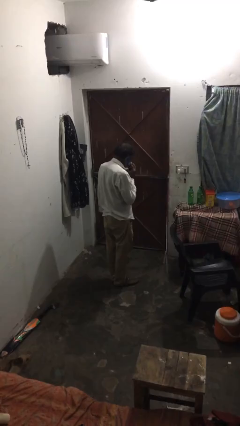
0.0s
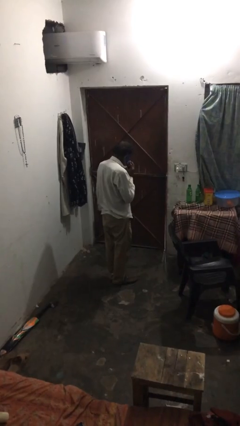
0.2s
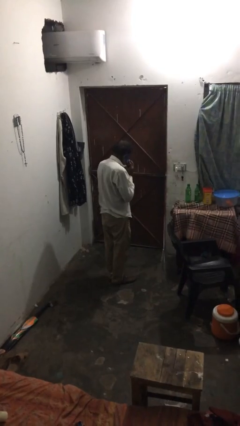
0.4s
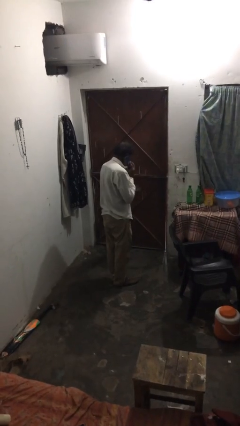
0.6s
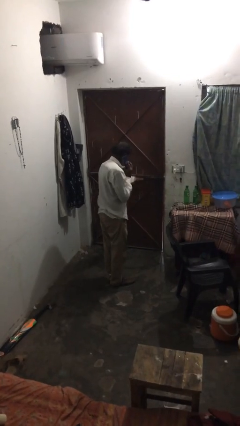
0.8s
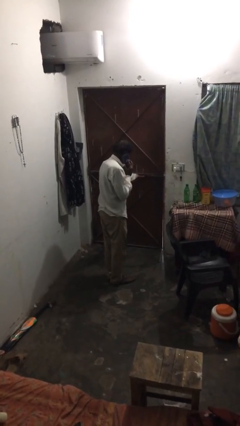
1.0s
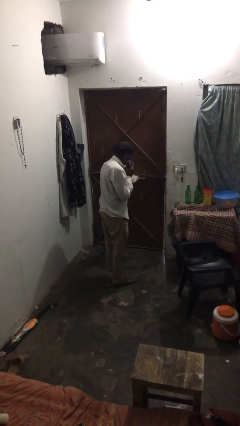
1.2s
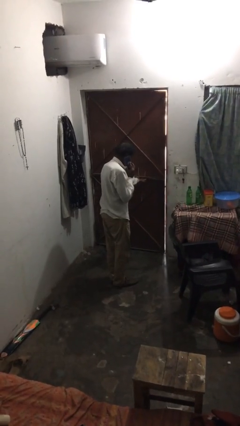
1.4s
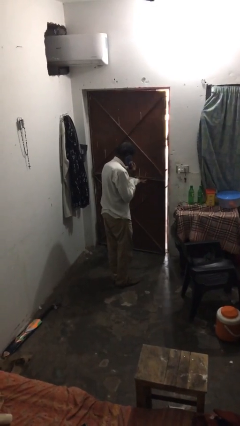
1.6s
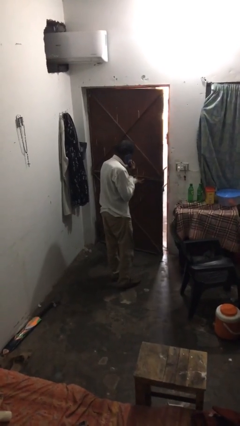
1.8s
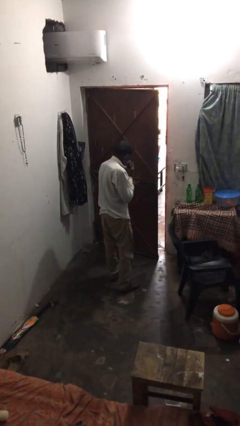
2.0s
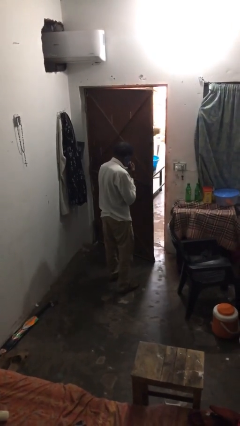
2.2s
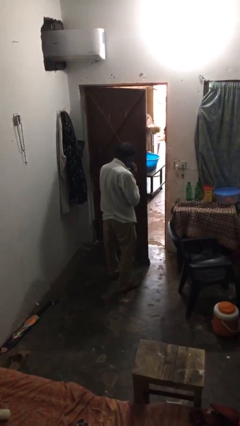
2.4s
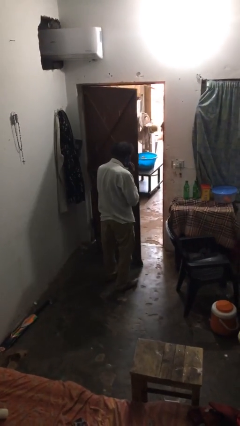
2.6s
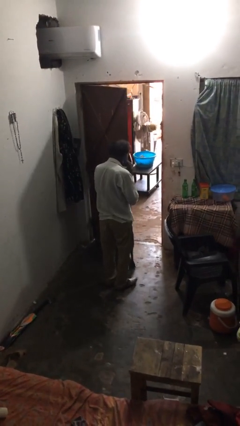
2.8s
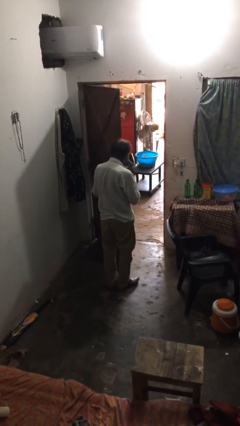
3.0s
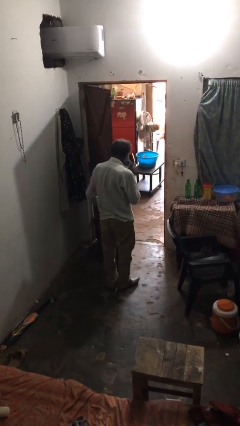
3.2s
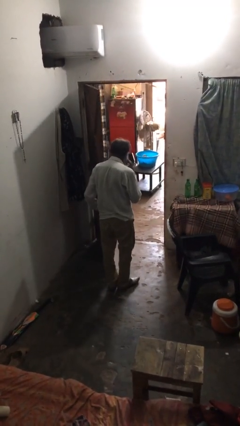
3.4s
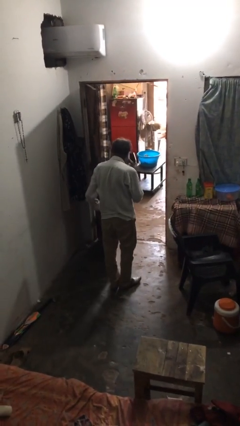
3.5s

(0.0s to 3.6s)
person opens facility door

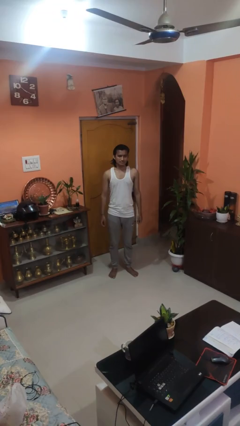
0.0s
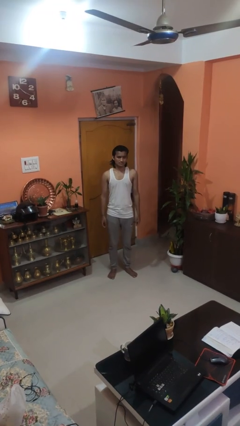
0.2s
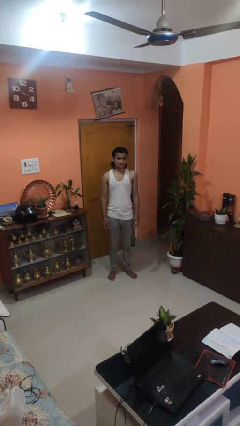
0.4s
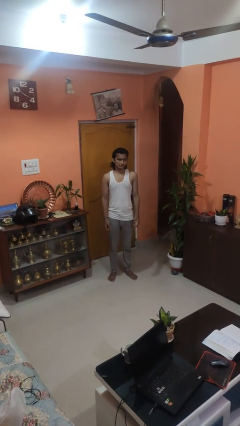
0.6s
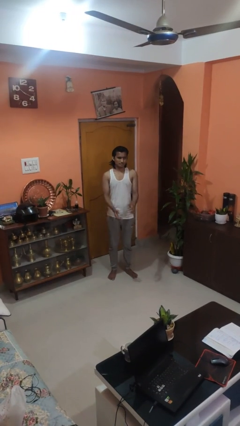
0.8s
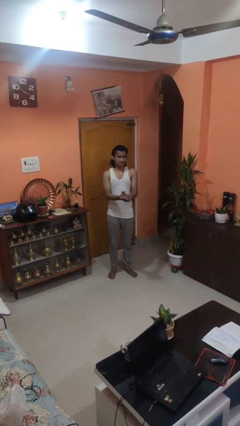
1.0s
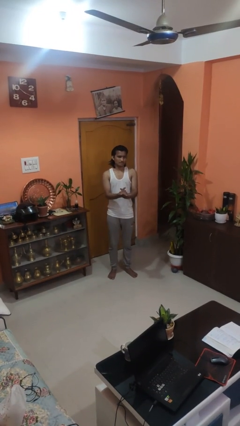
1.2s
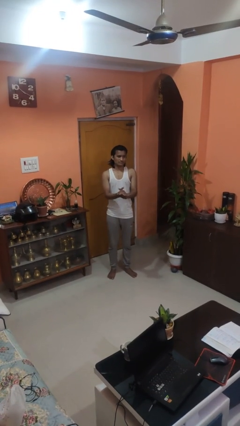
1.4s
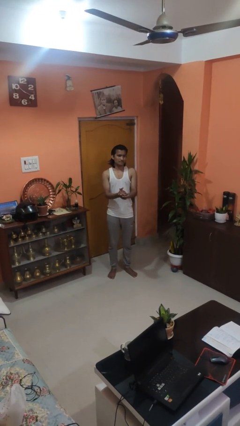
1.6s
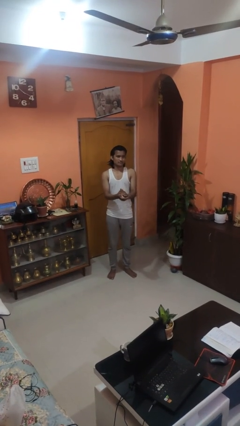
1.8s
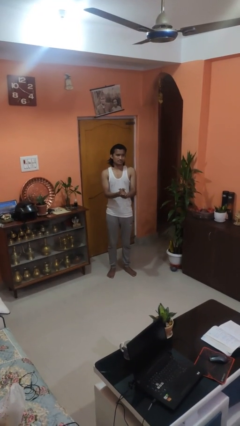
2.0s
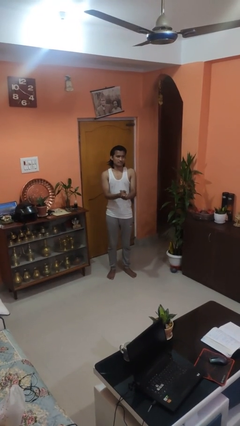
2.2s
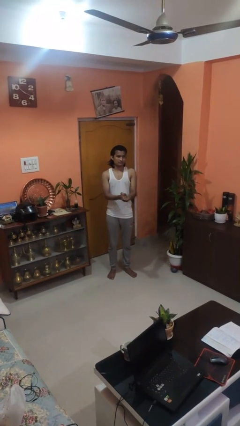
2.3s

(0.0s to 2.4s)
person claps hands

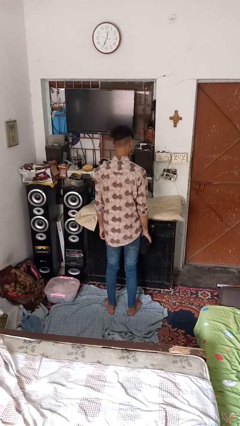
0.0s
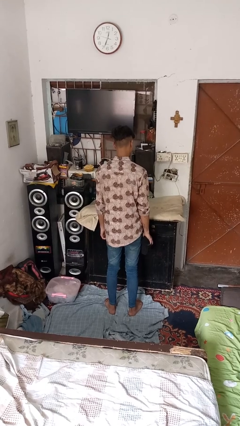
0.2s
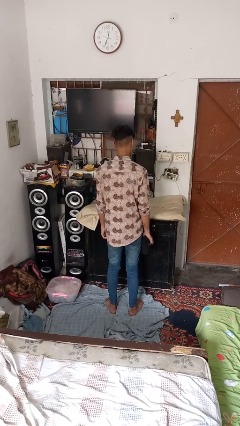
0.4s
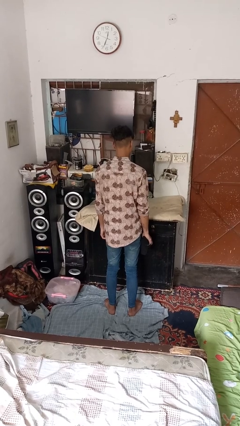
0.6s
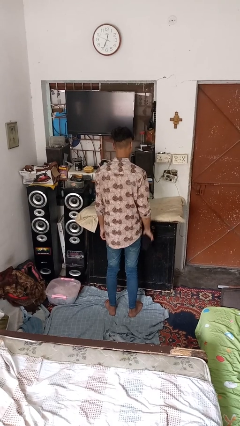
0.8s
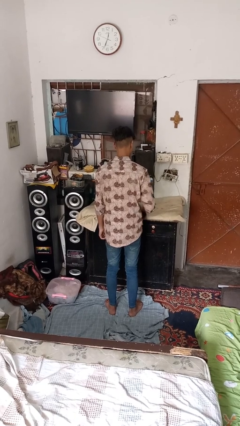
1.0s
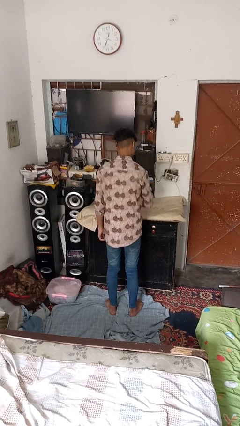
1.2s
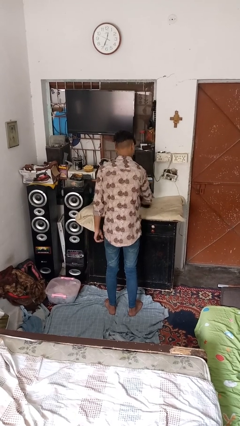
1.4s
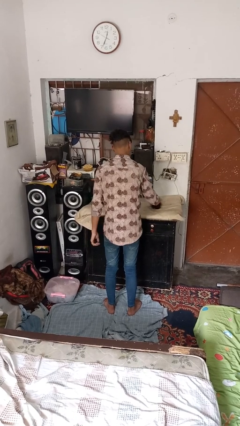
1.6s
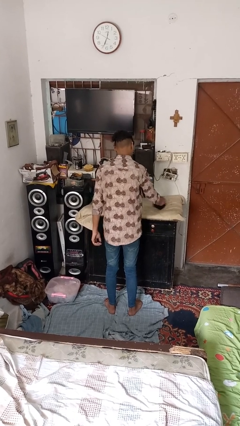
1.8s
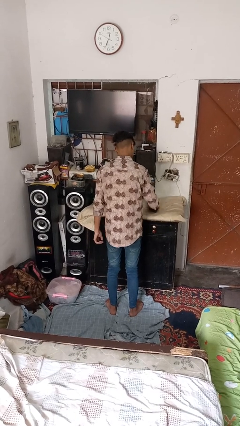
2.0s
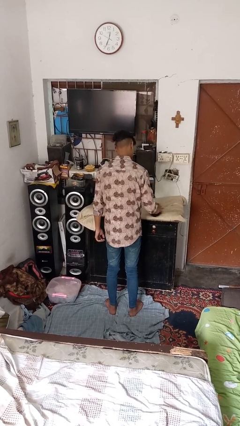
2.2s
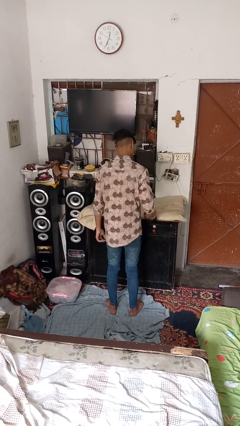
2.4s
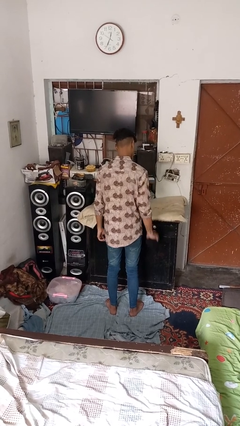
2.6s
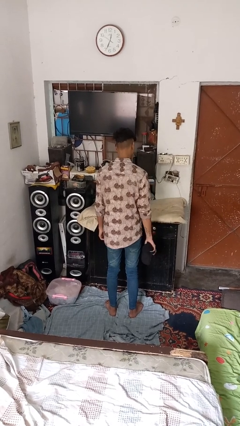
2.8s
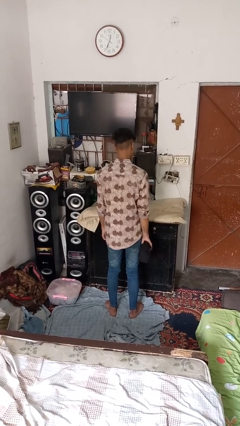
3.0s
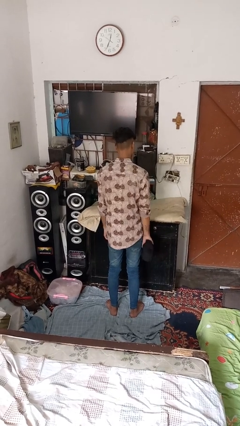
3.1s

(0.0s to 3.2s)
person cleans table with rag

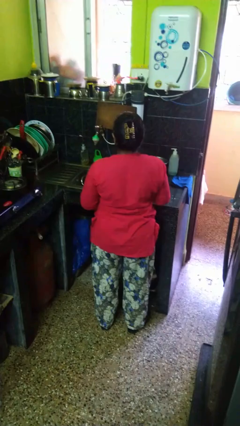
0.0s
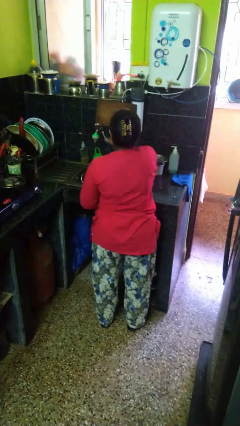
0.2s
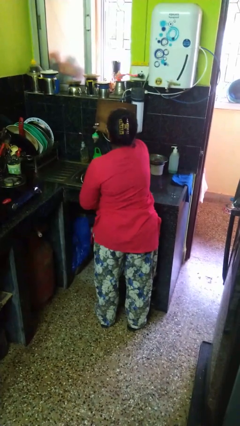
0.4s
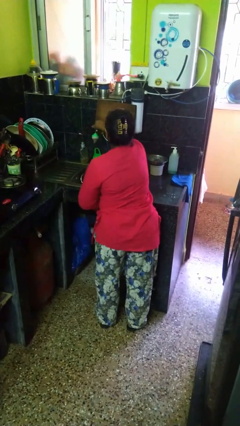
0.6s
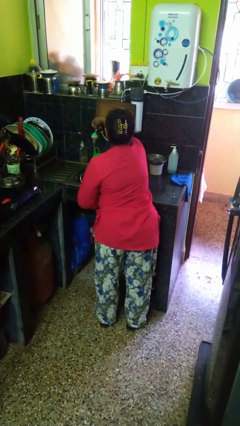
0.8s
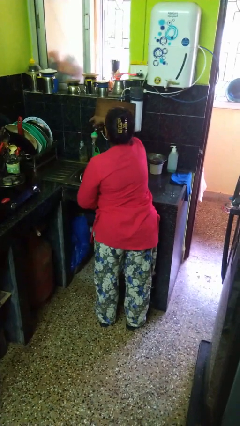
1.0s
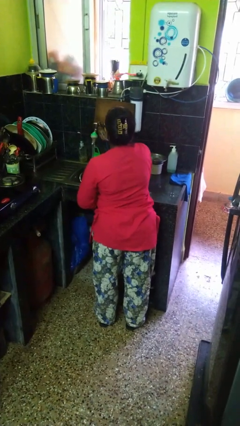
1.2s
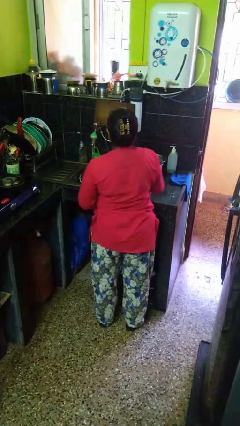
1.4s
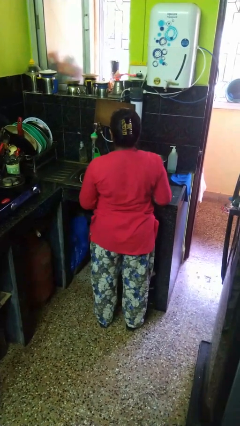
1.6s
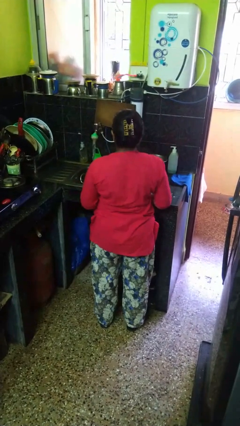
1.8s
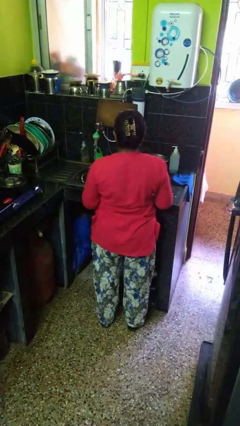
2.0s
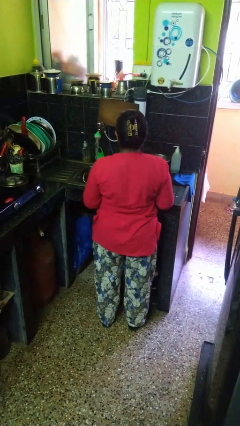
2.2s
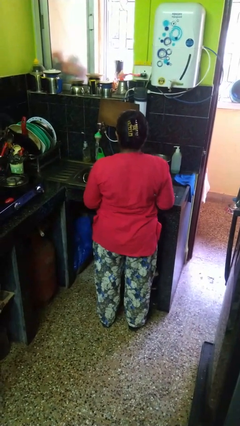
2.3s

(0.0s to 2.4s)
person turns on faucet

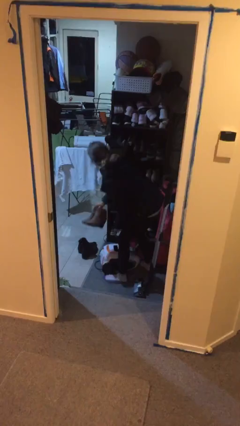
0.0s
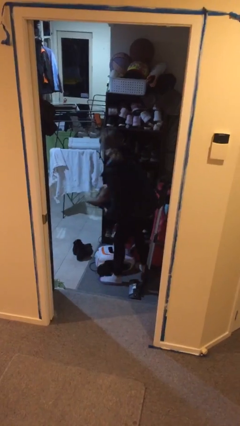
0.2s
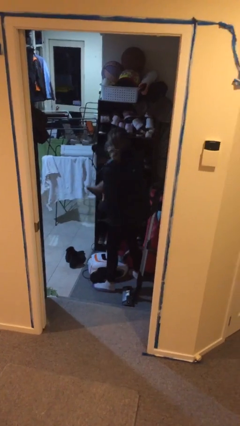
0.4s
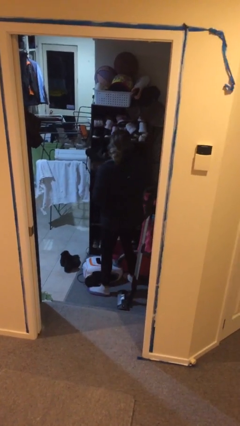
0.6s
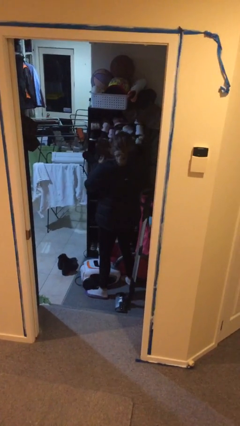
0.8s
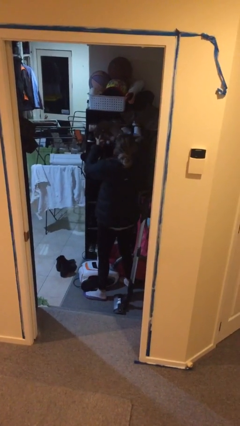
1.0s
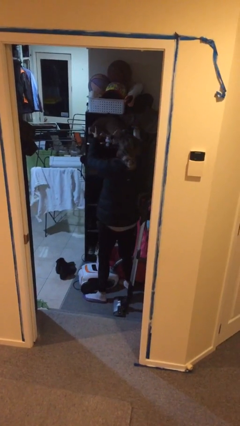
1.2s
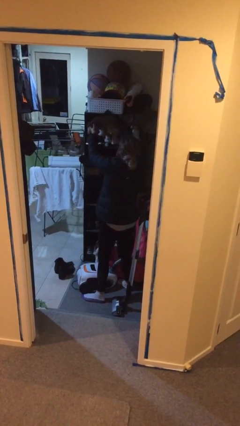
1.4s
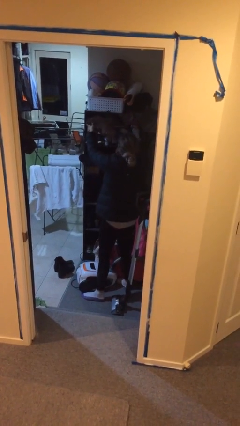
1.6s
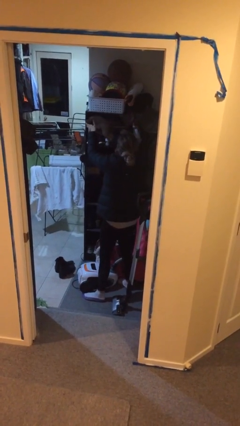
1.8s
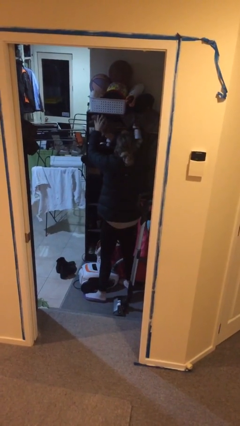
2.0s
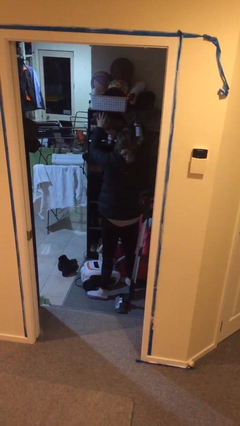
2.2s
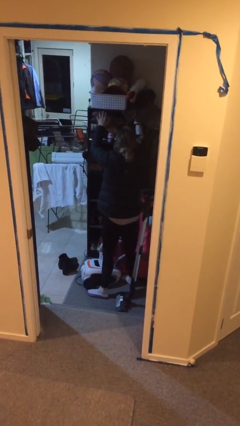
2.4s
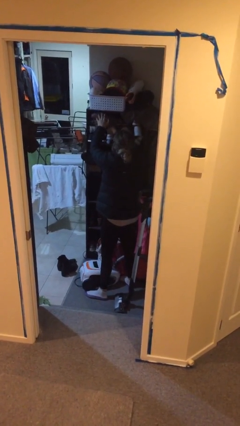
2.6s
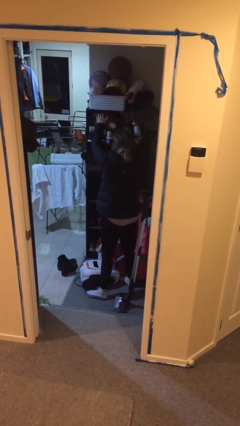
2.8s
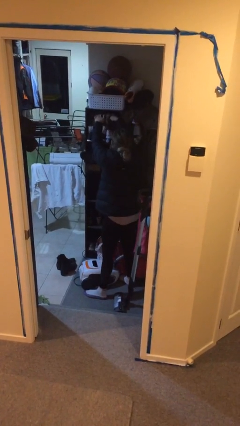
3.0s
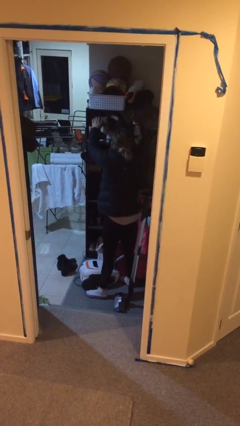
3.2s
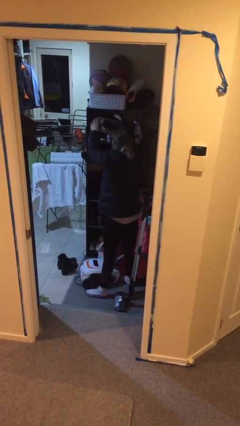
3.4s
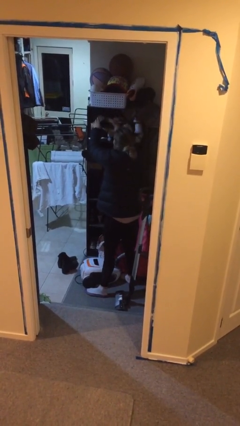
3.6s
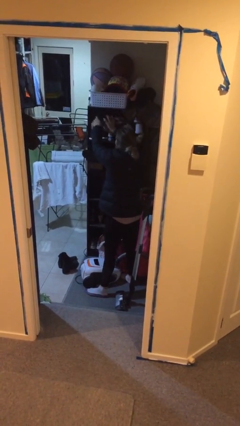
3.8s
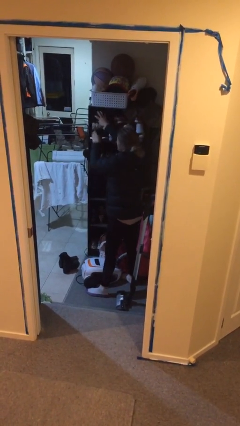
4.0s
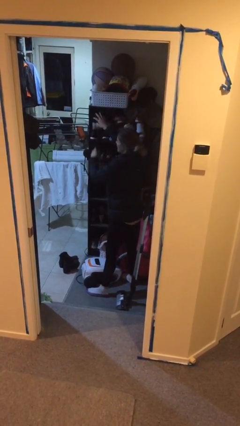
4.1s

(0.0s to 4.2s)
person puts down object on shelf

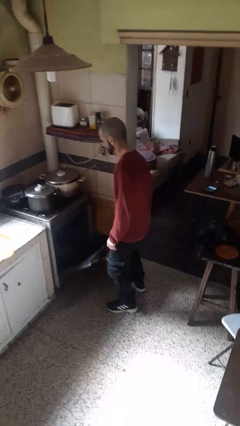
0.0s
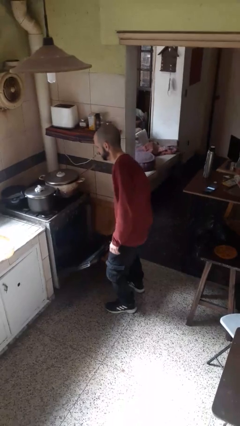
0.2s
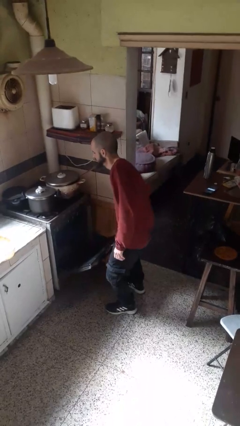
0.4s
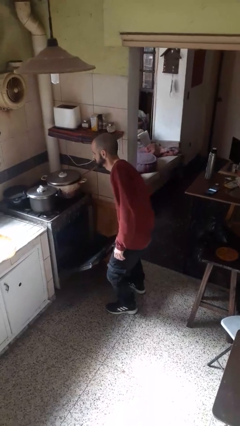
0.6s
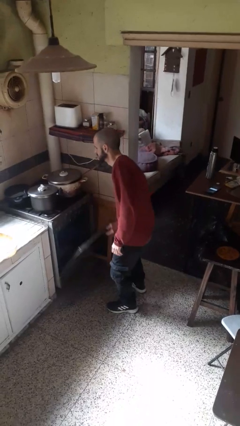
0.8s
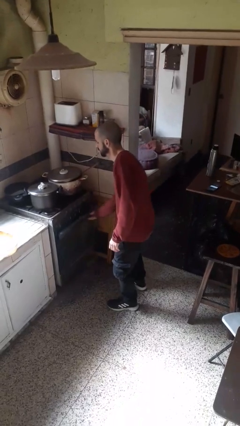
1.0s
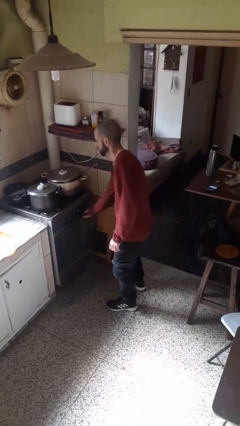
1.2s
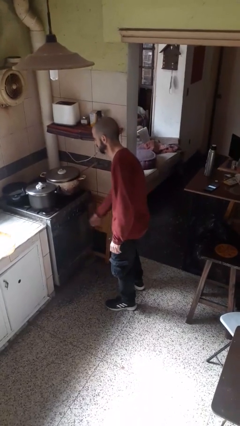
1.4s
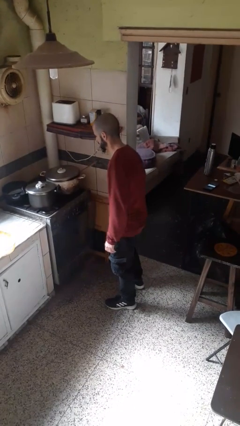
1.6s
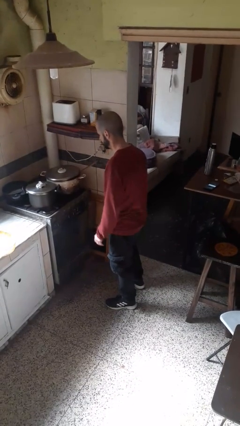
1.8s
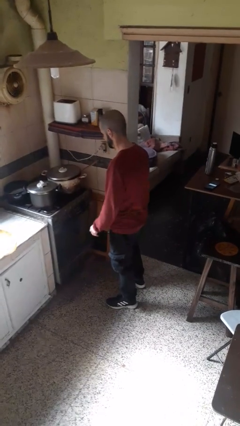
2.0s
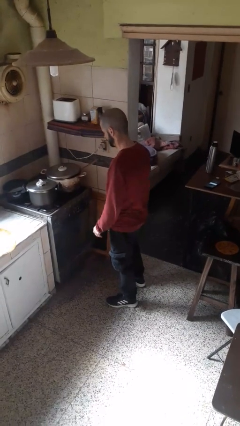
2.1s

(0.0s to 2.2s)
person closes oven door
